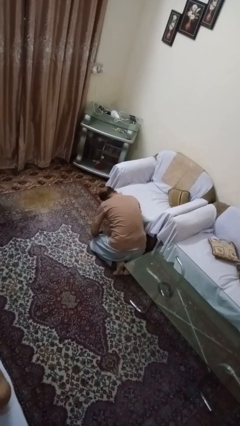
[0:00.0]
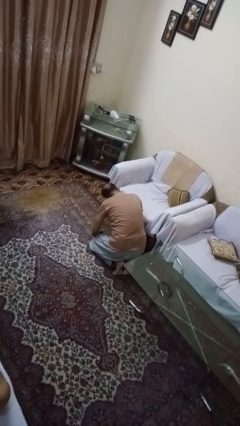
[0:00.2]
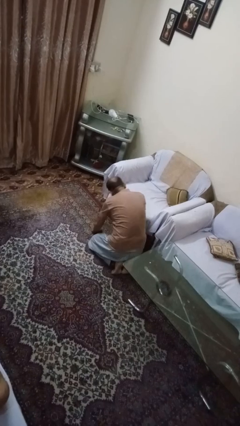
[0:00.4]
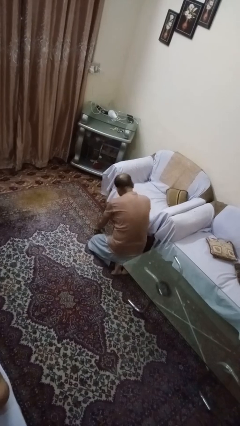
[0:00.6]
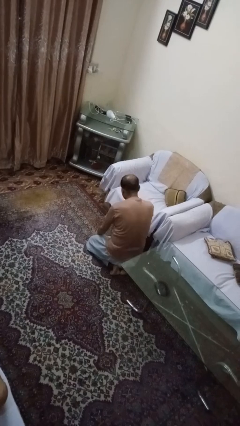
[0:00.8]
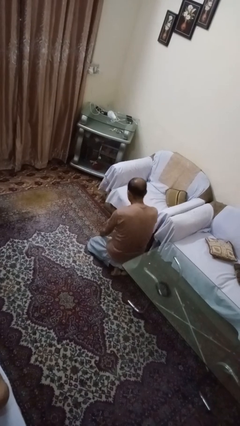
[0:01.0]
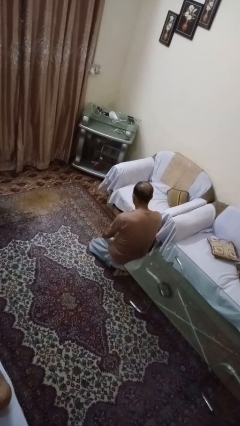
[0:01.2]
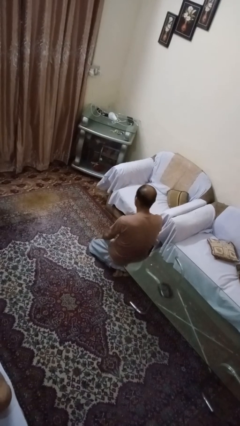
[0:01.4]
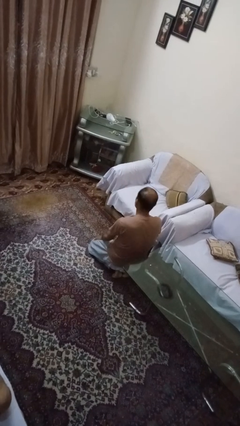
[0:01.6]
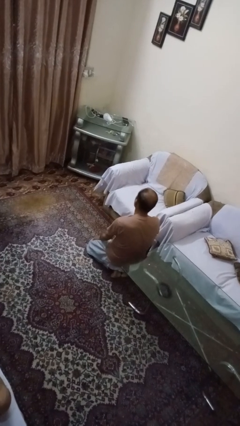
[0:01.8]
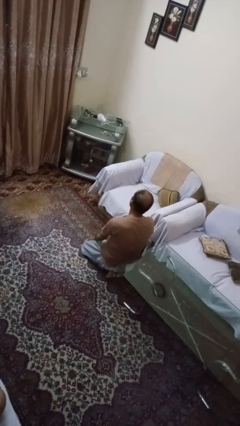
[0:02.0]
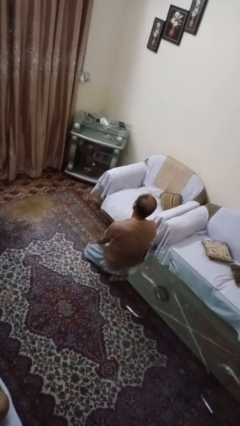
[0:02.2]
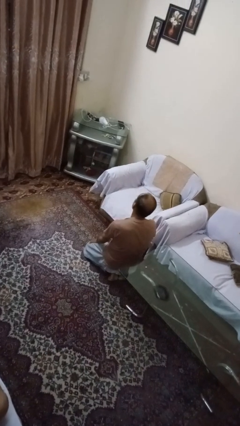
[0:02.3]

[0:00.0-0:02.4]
person searches under couch

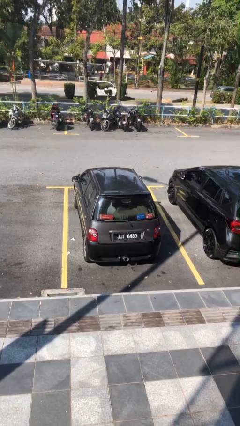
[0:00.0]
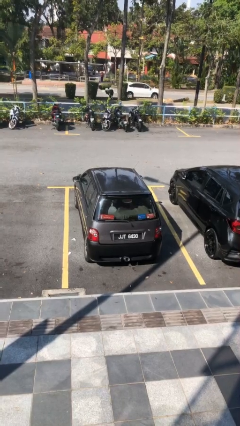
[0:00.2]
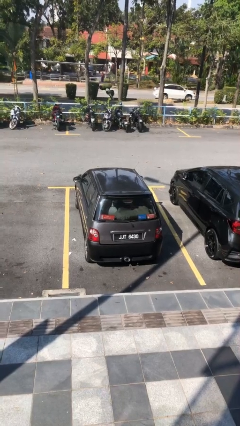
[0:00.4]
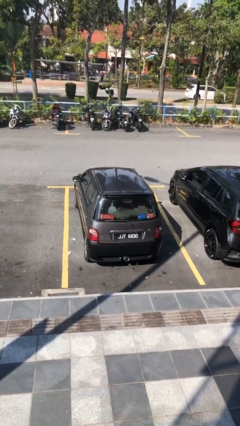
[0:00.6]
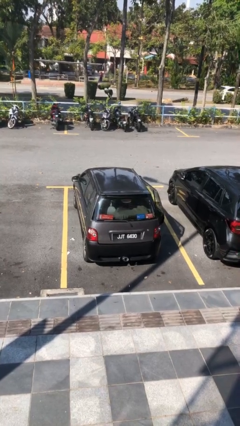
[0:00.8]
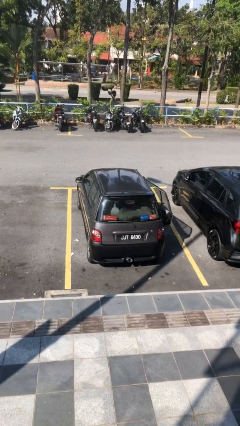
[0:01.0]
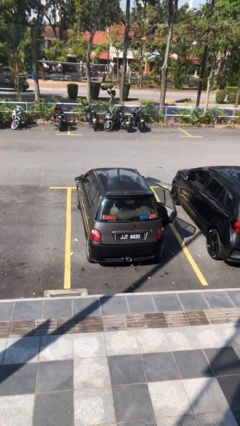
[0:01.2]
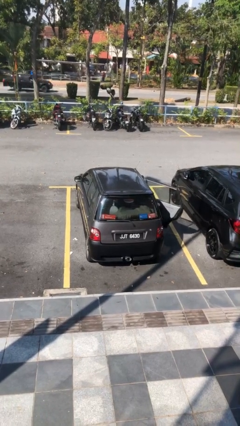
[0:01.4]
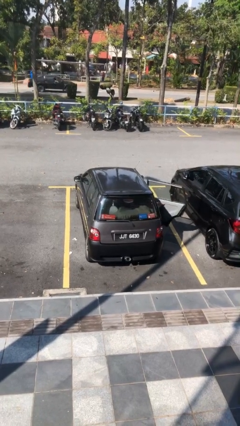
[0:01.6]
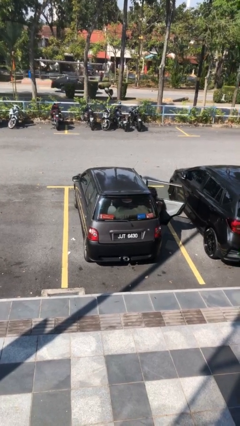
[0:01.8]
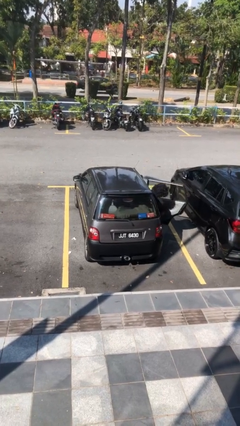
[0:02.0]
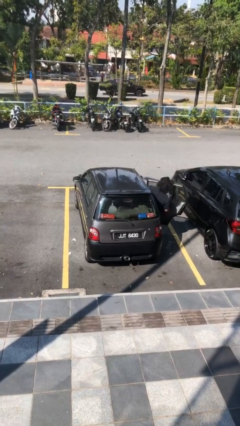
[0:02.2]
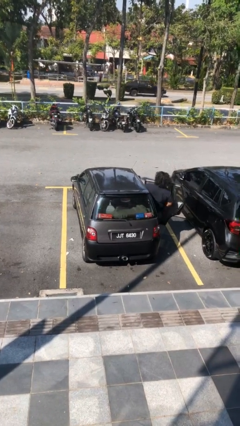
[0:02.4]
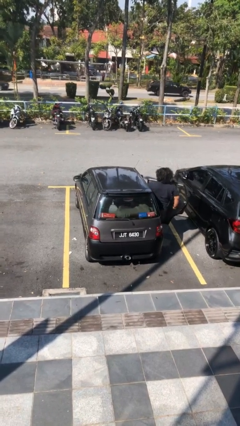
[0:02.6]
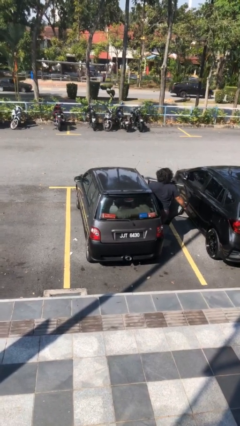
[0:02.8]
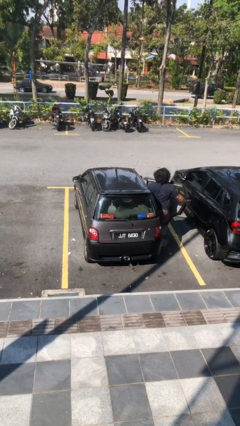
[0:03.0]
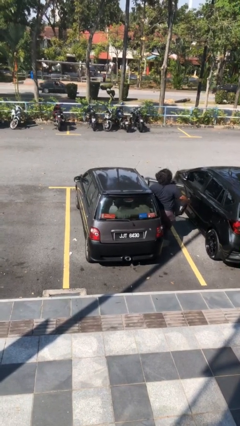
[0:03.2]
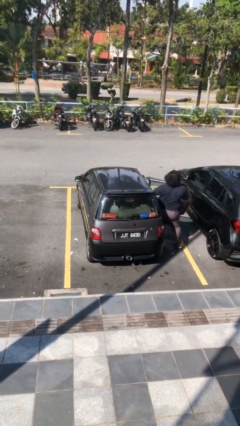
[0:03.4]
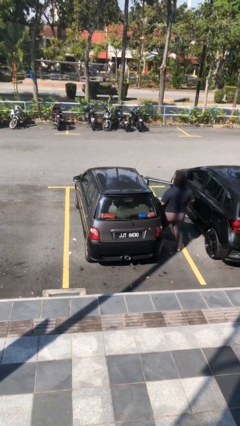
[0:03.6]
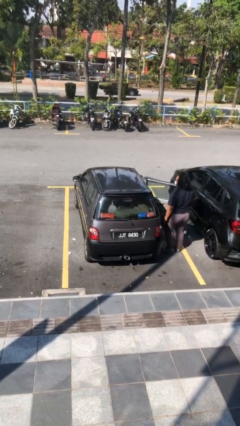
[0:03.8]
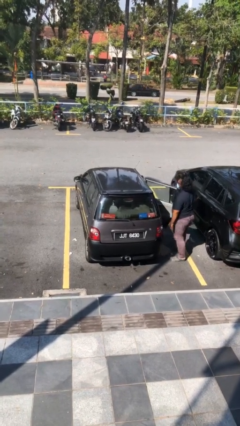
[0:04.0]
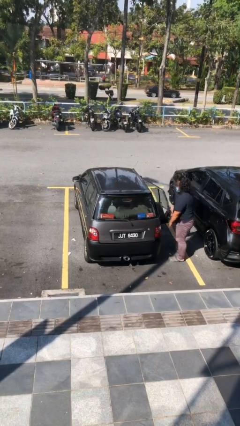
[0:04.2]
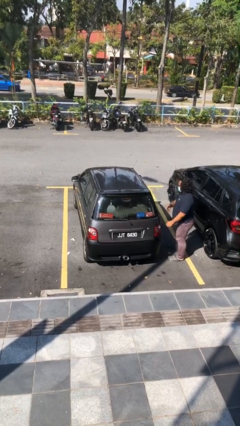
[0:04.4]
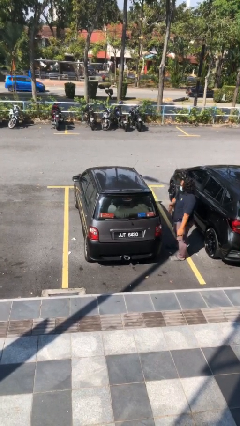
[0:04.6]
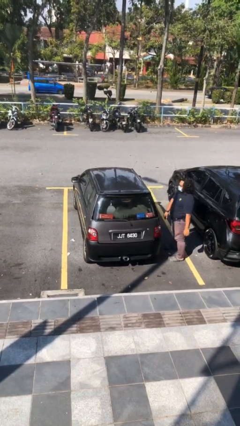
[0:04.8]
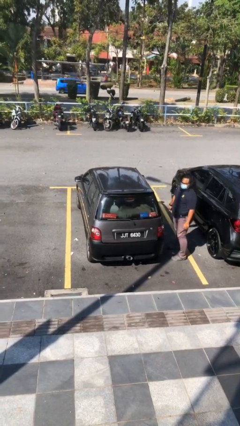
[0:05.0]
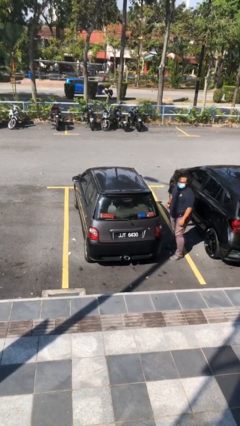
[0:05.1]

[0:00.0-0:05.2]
car drops off person

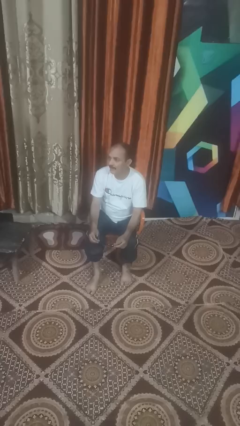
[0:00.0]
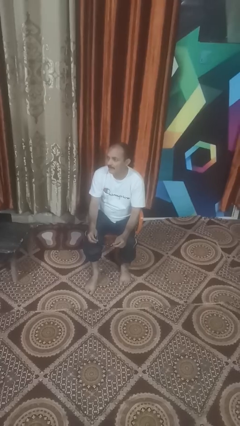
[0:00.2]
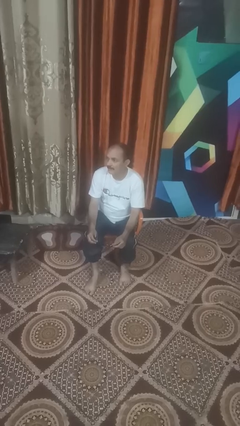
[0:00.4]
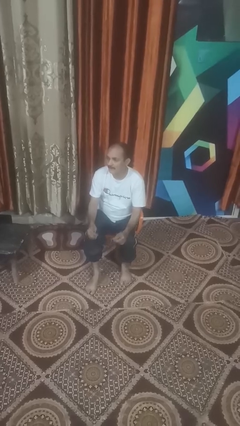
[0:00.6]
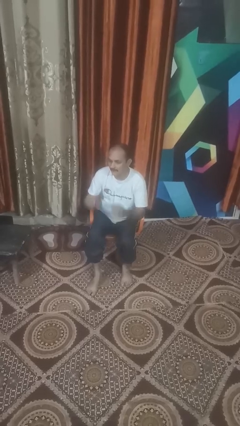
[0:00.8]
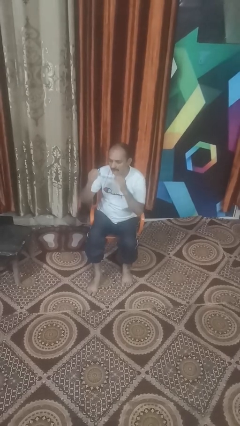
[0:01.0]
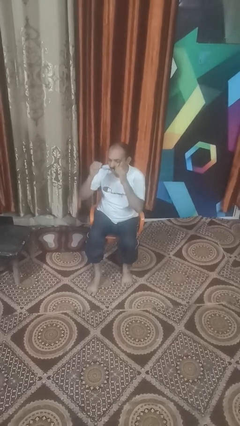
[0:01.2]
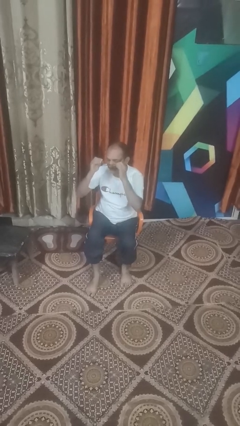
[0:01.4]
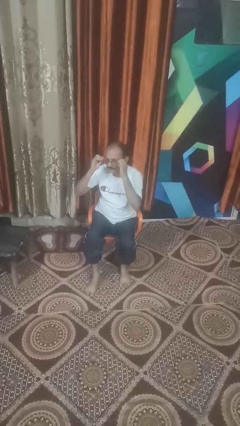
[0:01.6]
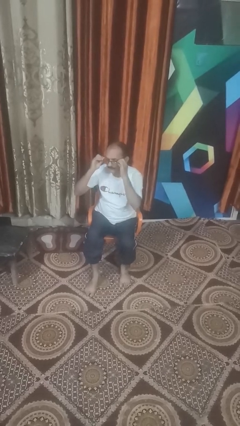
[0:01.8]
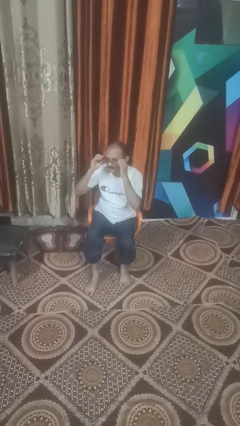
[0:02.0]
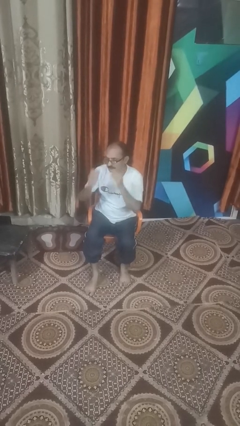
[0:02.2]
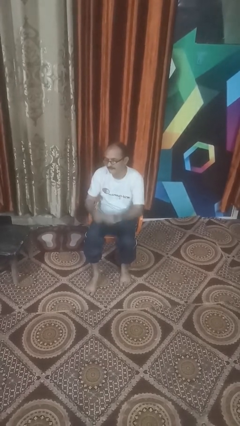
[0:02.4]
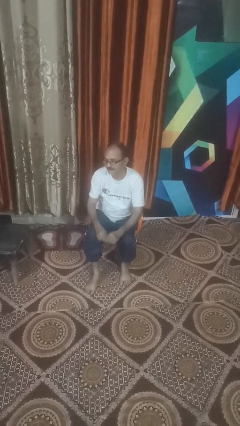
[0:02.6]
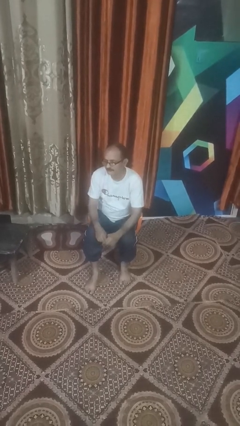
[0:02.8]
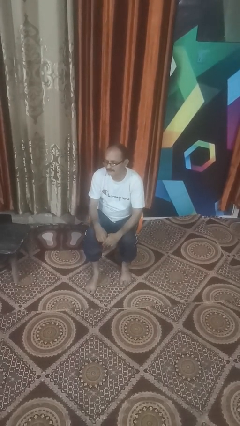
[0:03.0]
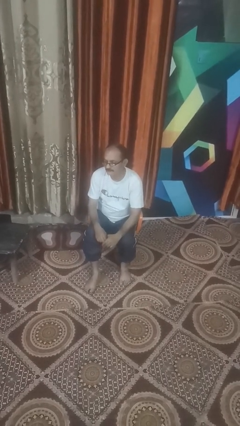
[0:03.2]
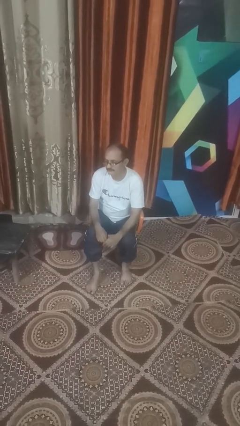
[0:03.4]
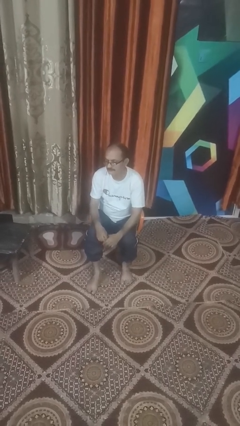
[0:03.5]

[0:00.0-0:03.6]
person puts on glasses

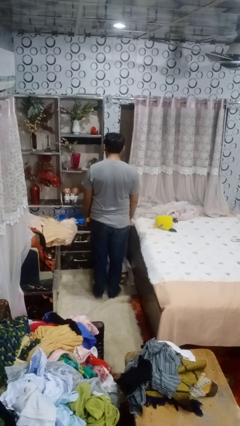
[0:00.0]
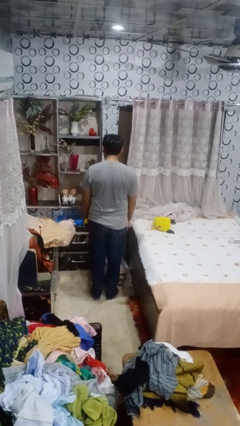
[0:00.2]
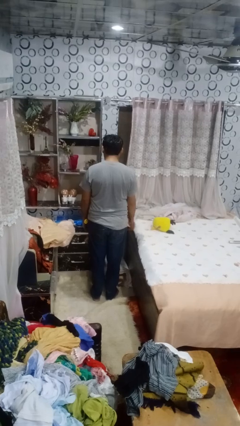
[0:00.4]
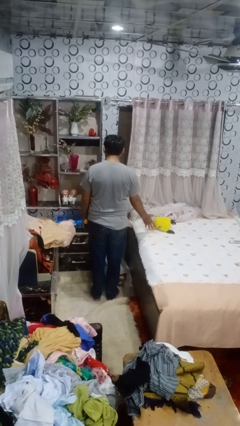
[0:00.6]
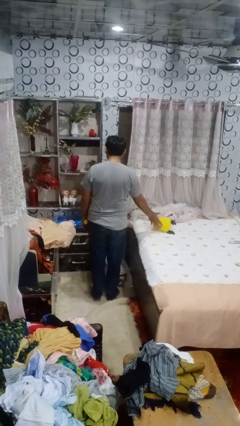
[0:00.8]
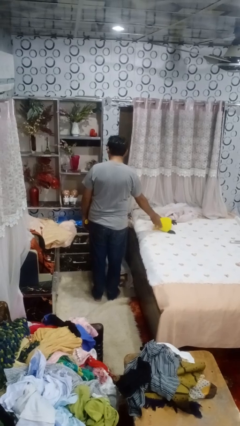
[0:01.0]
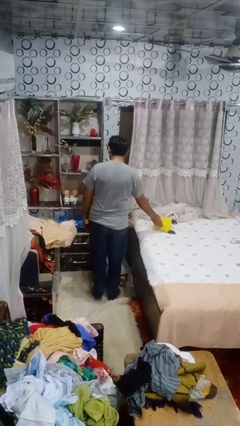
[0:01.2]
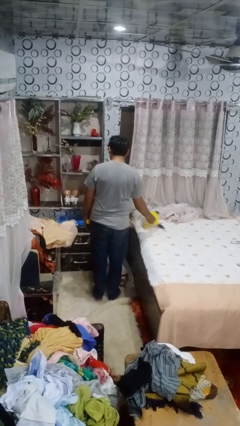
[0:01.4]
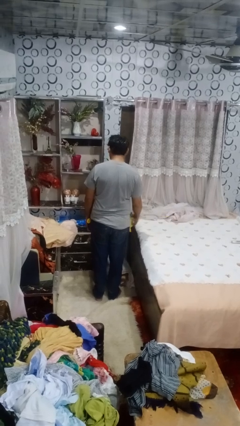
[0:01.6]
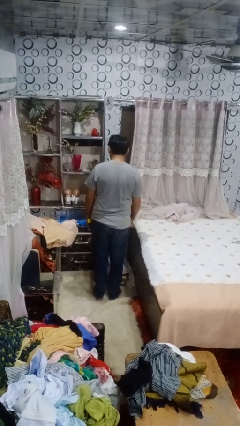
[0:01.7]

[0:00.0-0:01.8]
person picks up object from bed

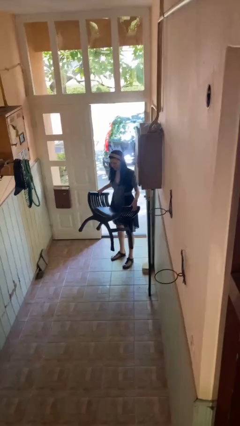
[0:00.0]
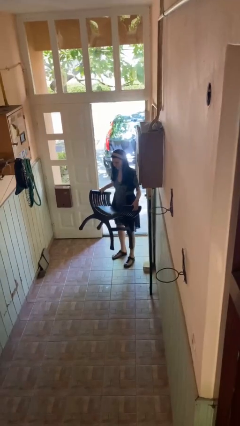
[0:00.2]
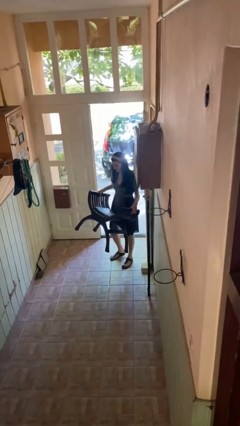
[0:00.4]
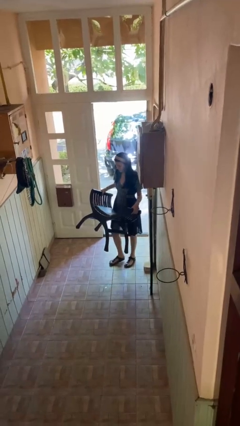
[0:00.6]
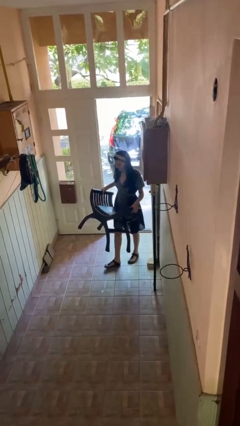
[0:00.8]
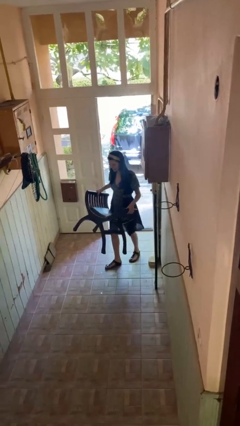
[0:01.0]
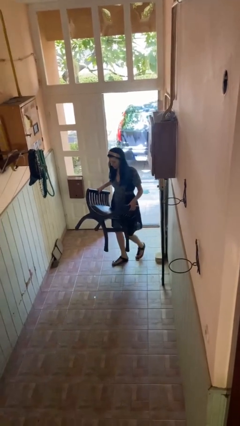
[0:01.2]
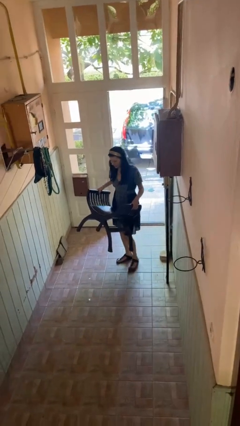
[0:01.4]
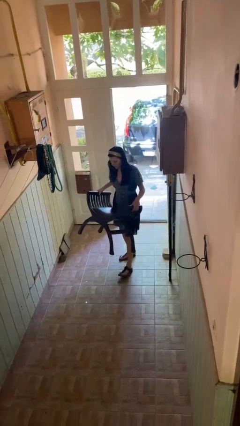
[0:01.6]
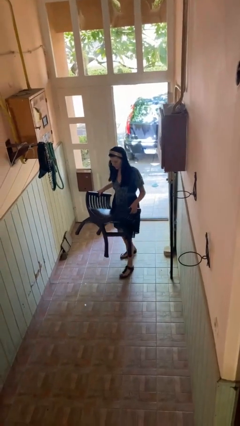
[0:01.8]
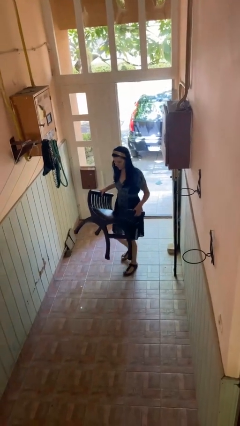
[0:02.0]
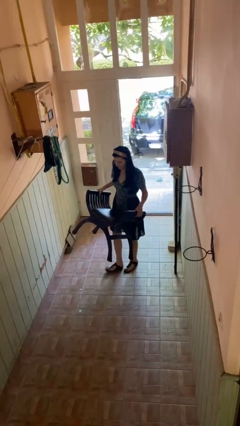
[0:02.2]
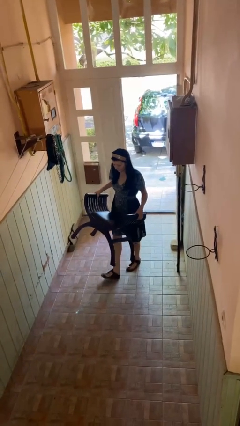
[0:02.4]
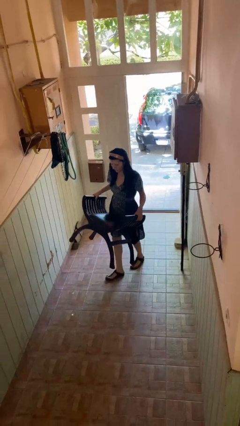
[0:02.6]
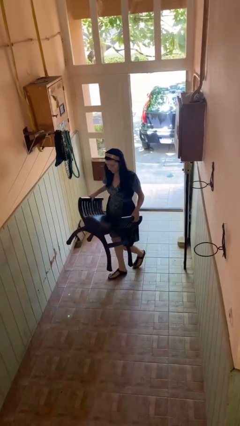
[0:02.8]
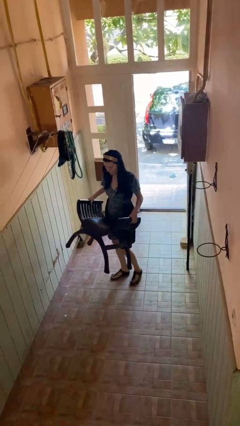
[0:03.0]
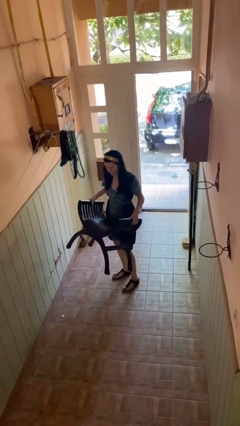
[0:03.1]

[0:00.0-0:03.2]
person carries furniture

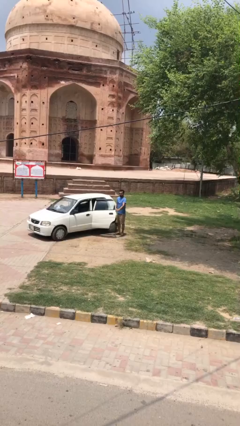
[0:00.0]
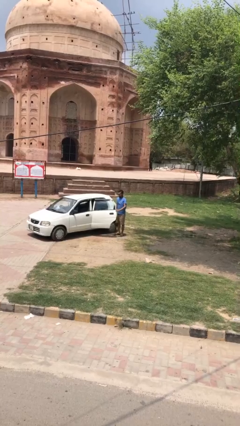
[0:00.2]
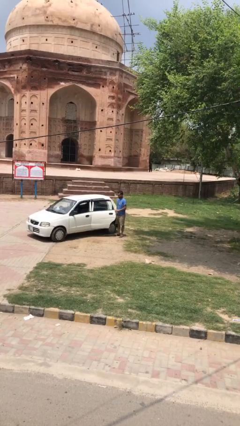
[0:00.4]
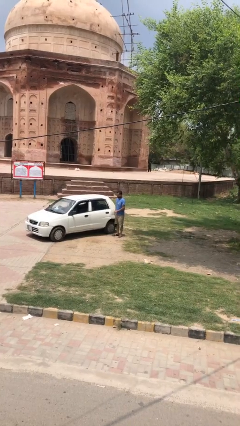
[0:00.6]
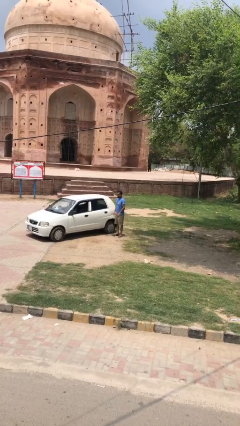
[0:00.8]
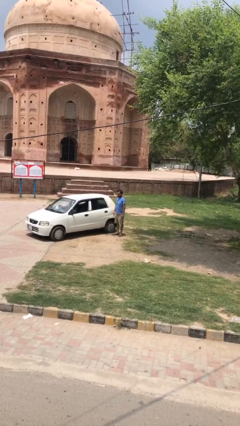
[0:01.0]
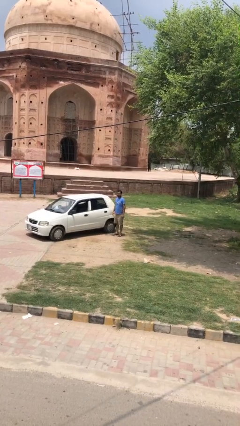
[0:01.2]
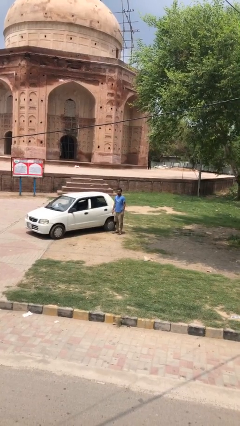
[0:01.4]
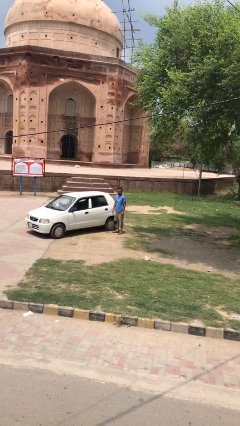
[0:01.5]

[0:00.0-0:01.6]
person closes car door
